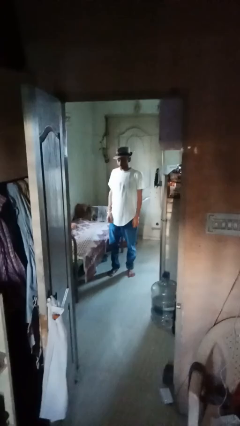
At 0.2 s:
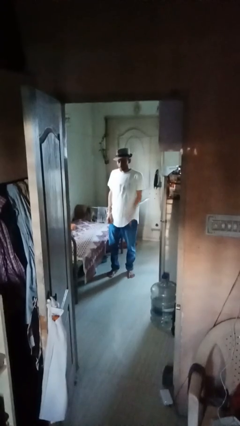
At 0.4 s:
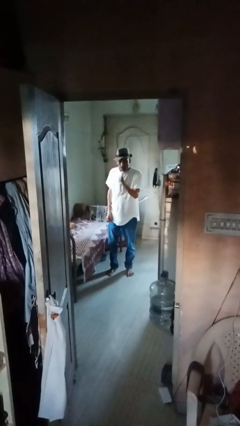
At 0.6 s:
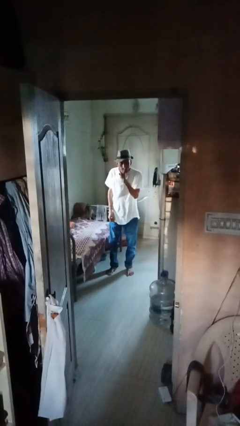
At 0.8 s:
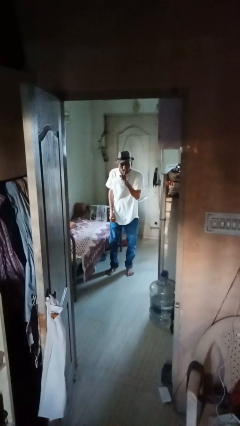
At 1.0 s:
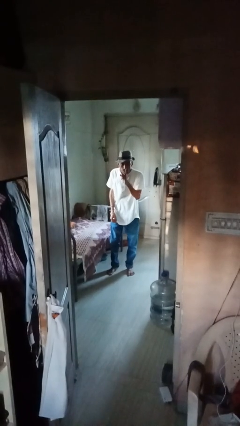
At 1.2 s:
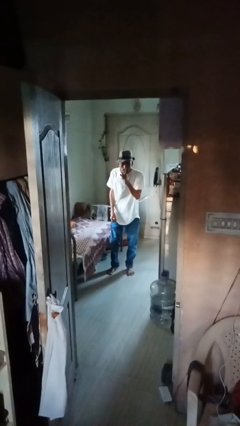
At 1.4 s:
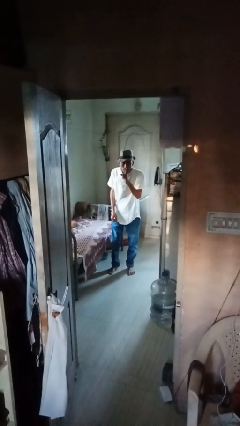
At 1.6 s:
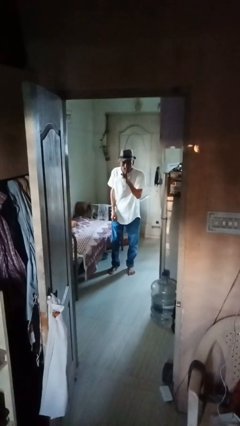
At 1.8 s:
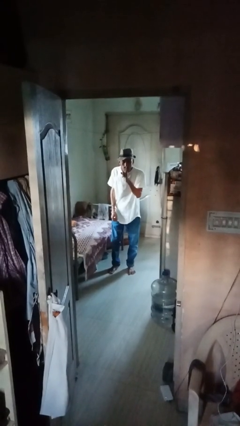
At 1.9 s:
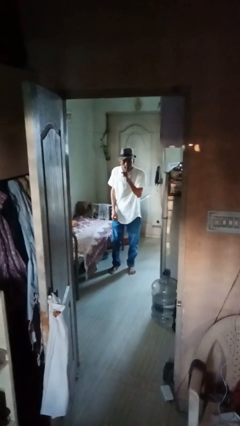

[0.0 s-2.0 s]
person gestures be quiet

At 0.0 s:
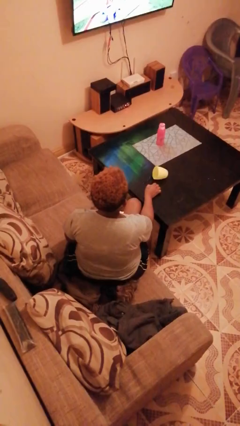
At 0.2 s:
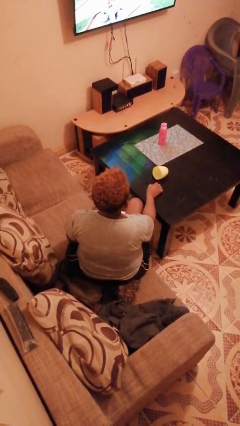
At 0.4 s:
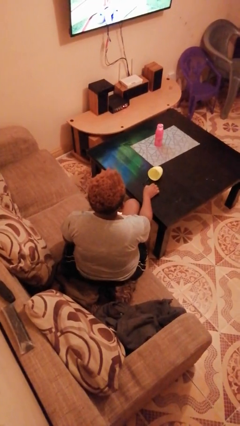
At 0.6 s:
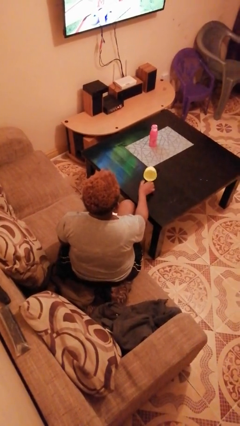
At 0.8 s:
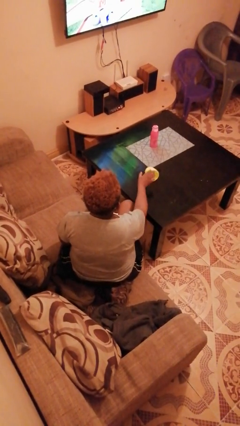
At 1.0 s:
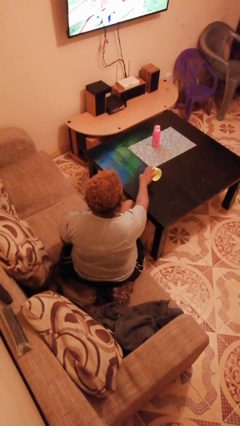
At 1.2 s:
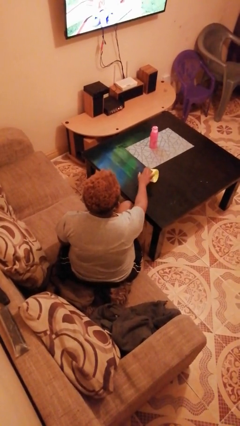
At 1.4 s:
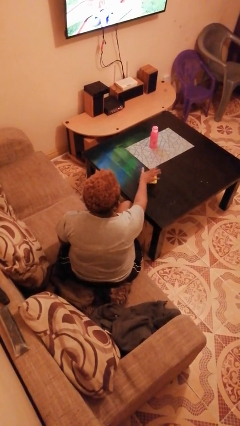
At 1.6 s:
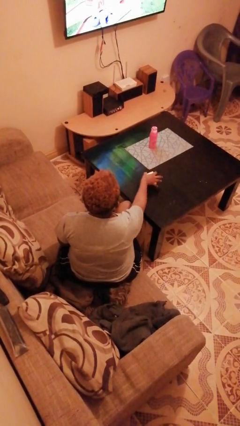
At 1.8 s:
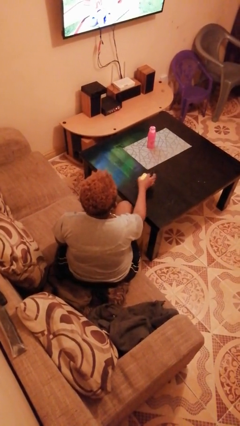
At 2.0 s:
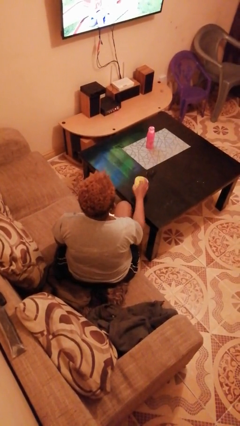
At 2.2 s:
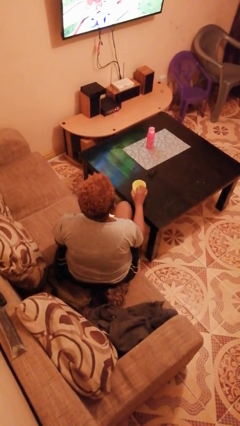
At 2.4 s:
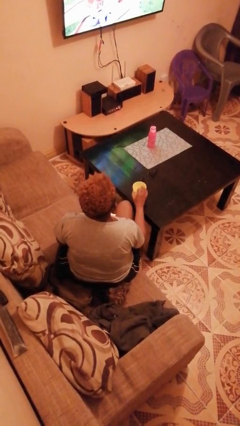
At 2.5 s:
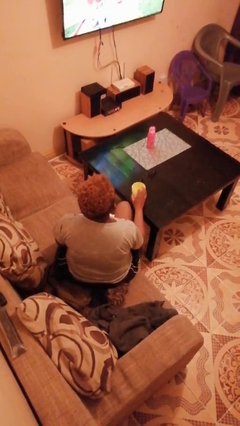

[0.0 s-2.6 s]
person sets upright glass

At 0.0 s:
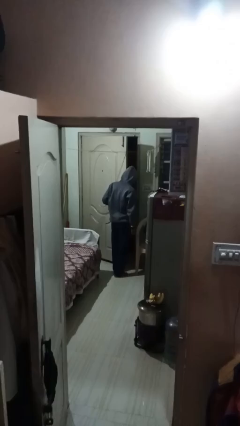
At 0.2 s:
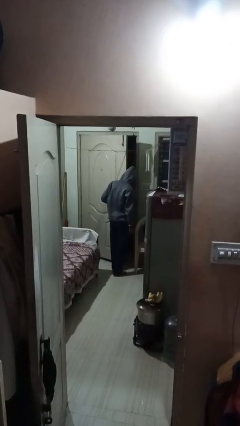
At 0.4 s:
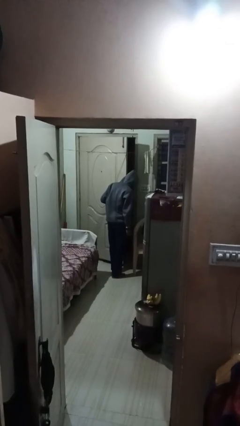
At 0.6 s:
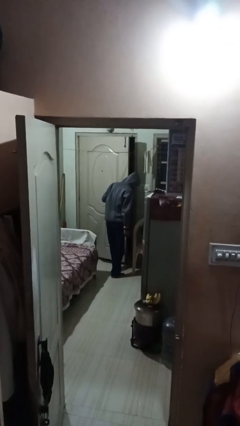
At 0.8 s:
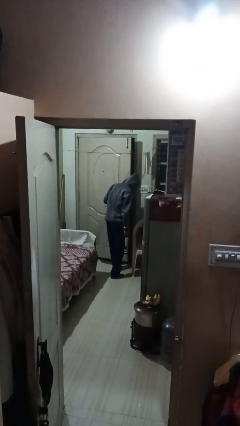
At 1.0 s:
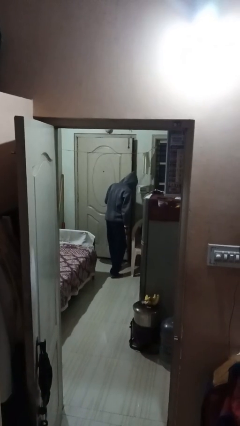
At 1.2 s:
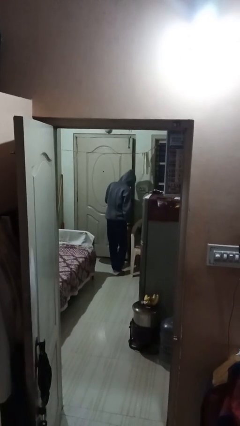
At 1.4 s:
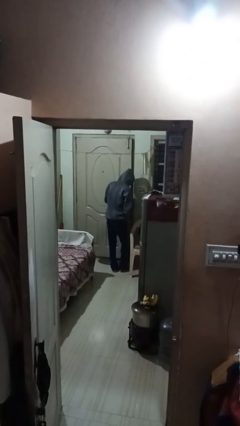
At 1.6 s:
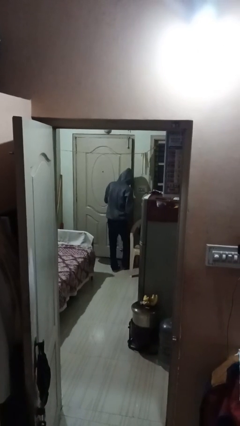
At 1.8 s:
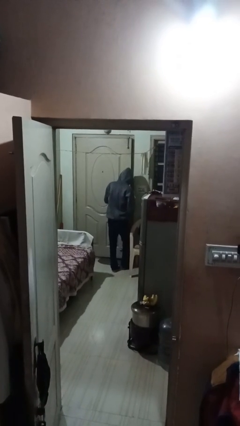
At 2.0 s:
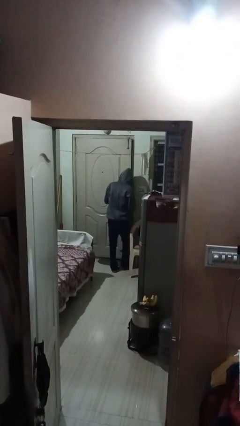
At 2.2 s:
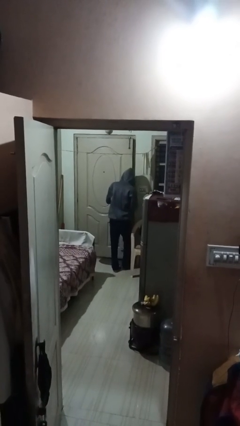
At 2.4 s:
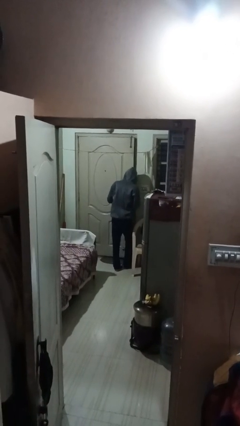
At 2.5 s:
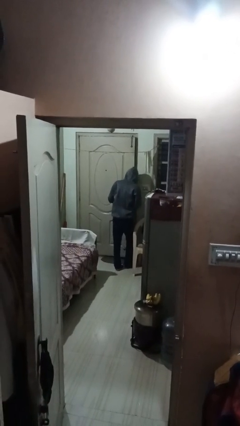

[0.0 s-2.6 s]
person closes facility door

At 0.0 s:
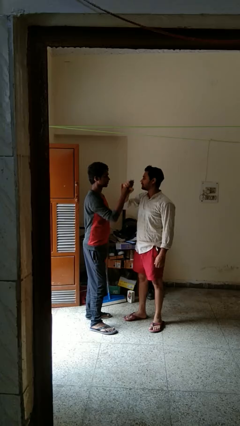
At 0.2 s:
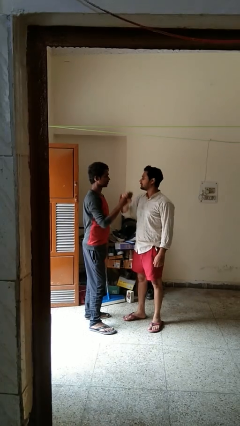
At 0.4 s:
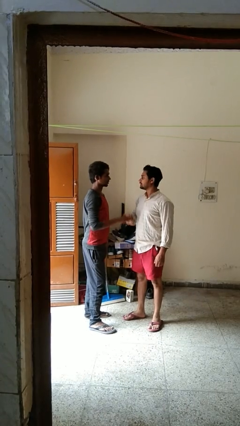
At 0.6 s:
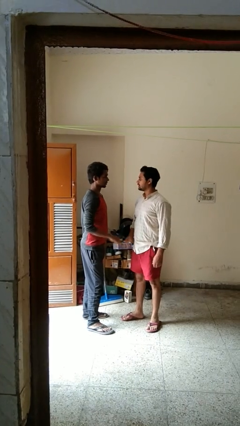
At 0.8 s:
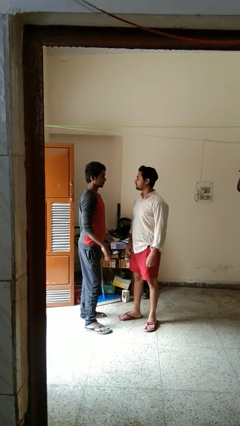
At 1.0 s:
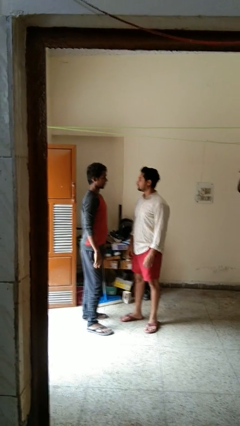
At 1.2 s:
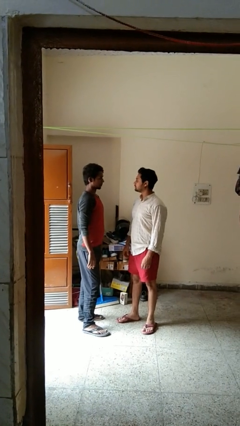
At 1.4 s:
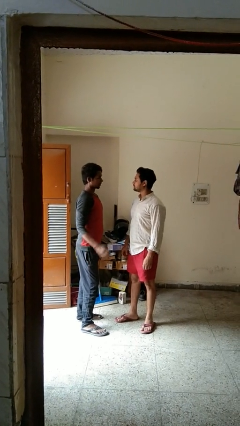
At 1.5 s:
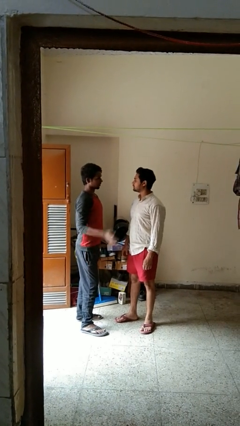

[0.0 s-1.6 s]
person highfives hand

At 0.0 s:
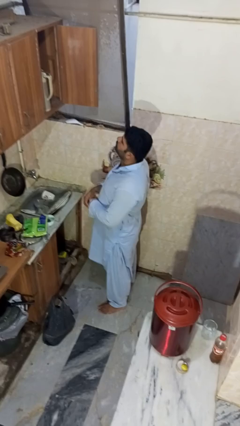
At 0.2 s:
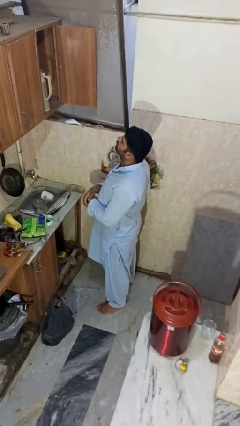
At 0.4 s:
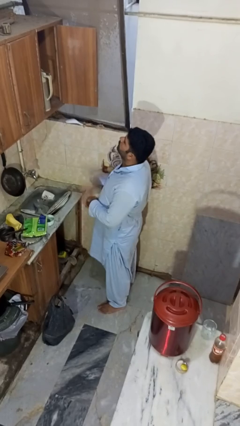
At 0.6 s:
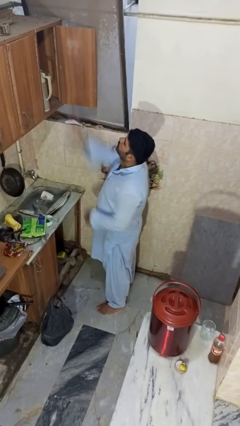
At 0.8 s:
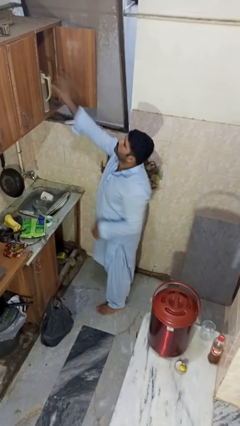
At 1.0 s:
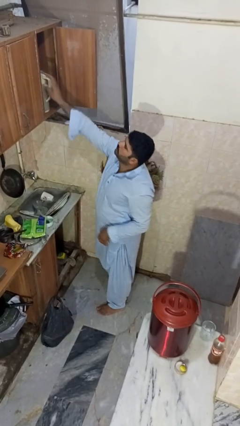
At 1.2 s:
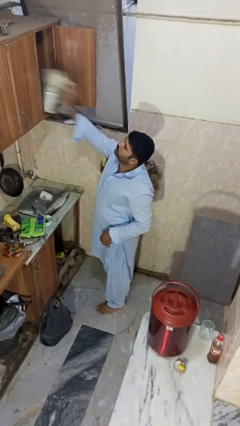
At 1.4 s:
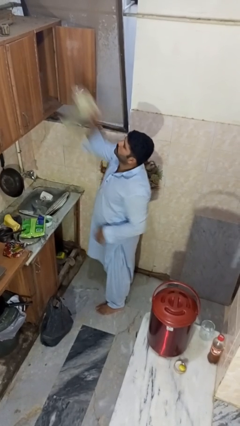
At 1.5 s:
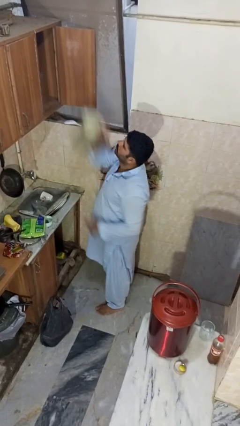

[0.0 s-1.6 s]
person takes object from cabinet

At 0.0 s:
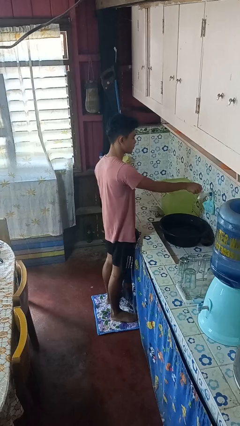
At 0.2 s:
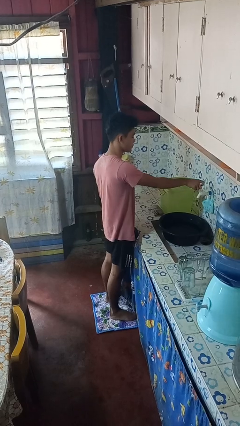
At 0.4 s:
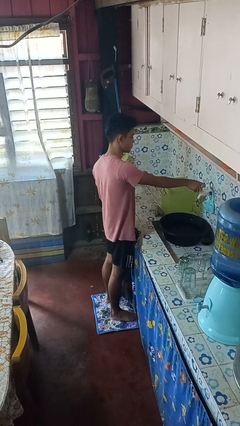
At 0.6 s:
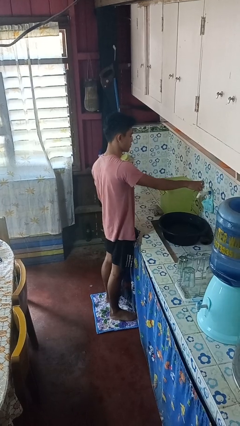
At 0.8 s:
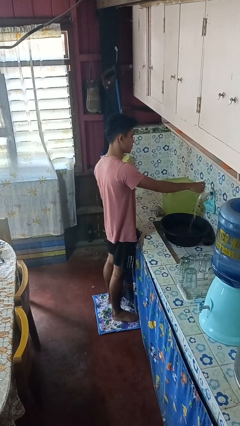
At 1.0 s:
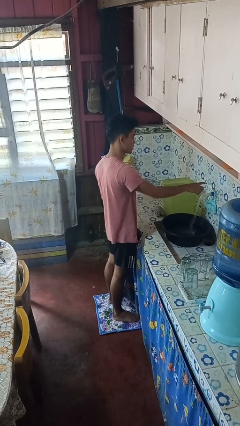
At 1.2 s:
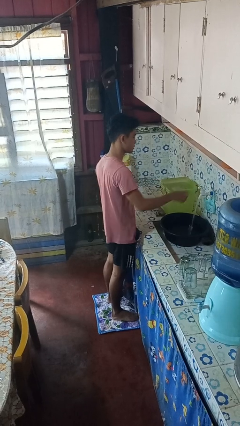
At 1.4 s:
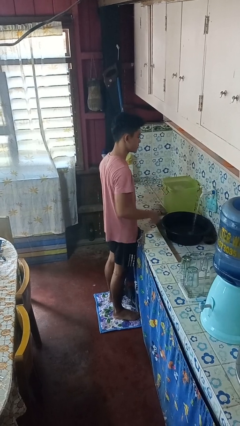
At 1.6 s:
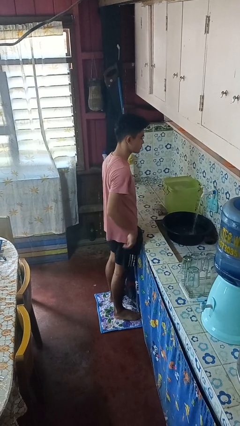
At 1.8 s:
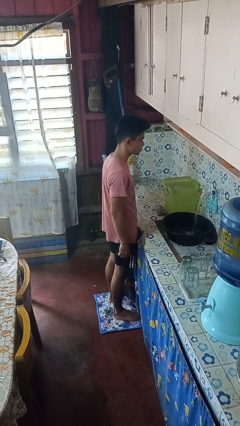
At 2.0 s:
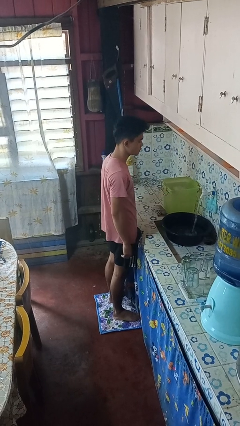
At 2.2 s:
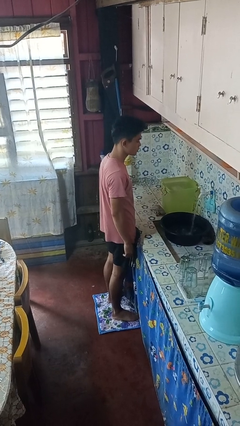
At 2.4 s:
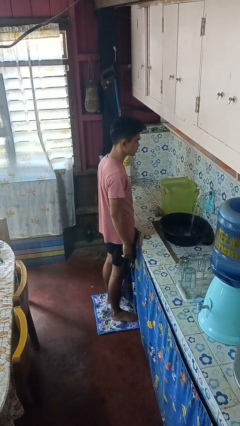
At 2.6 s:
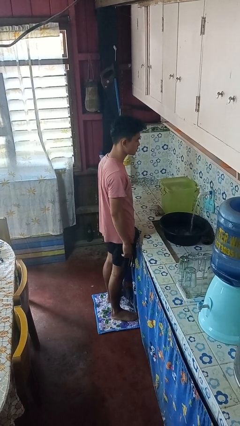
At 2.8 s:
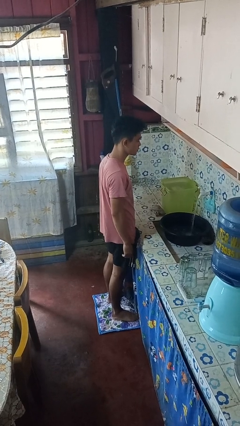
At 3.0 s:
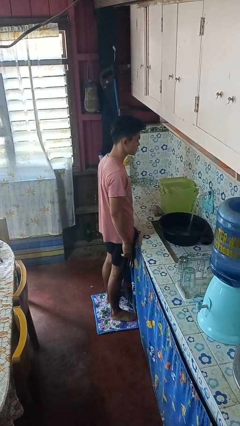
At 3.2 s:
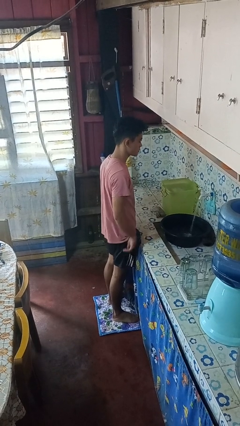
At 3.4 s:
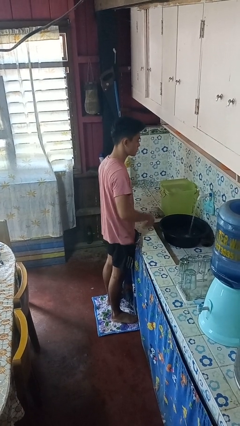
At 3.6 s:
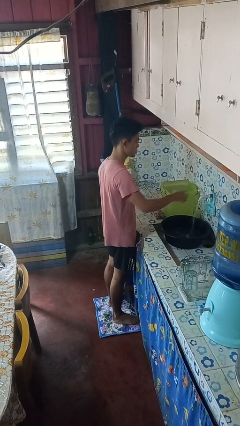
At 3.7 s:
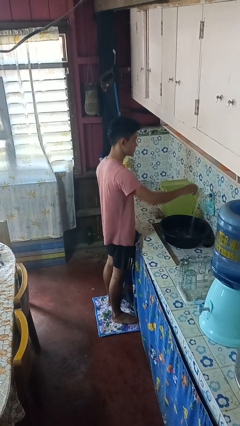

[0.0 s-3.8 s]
person turns on faucet

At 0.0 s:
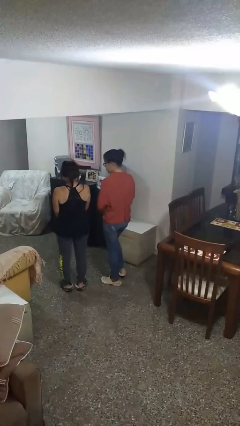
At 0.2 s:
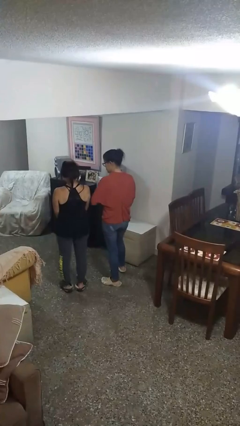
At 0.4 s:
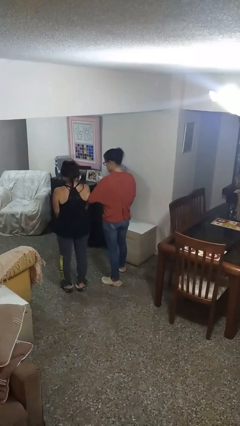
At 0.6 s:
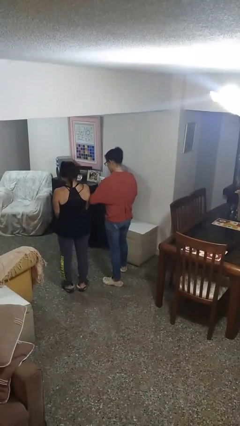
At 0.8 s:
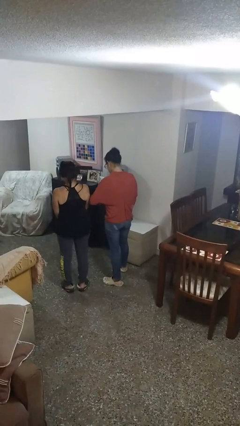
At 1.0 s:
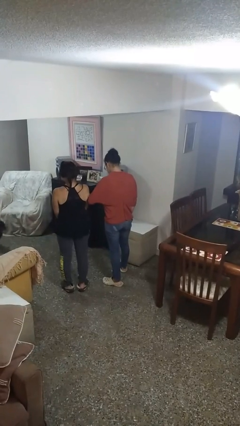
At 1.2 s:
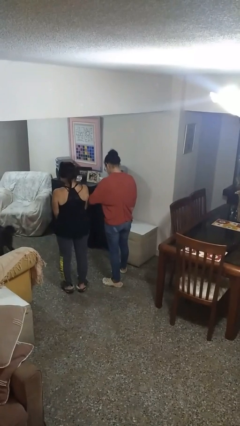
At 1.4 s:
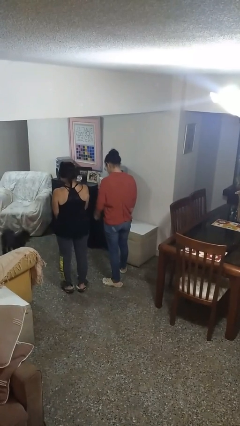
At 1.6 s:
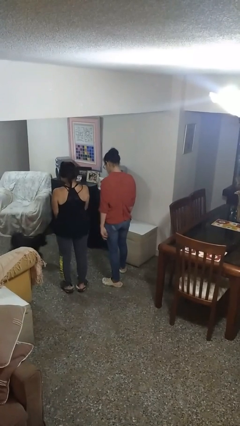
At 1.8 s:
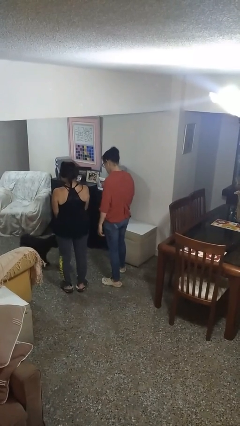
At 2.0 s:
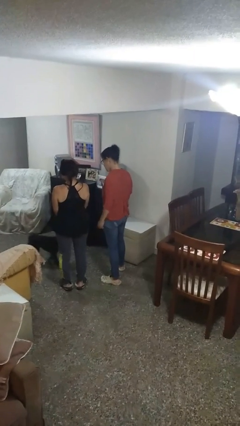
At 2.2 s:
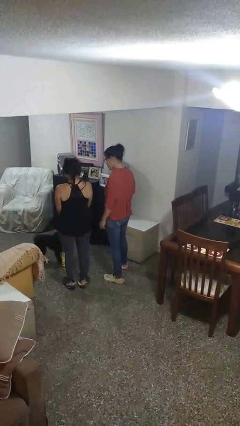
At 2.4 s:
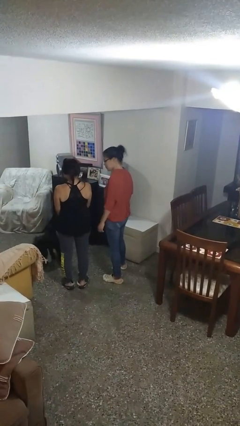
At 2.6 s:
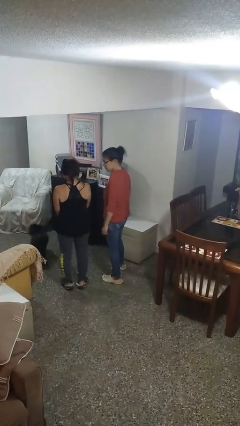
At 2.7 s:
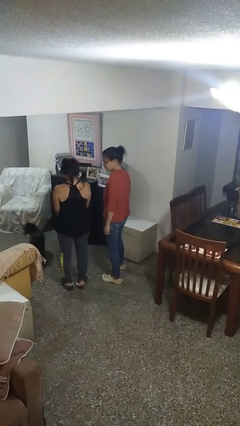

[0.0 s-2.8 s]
person nudges person with elbow
